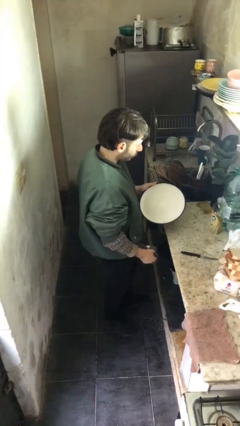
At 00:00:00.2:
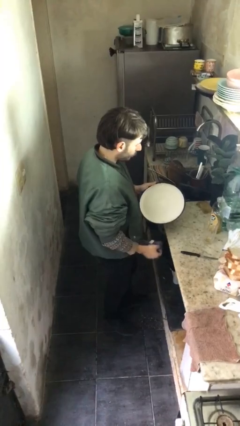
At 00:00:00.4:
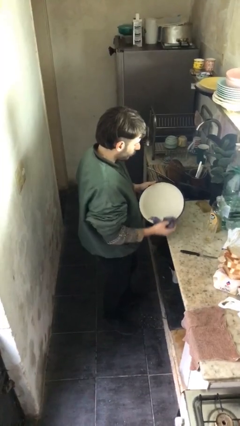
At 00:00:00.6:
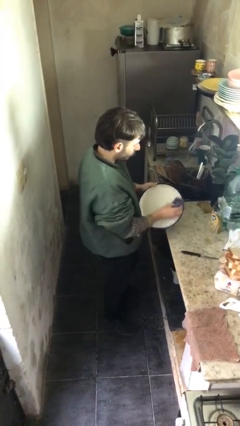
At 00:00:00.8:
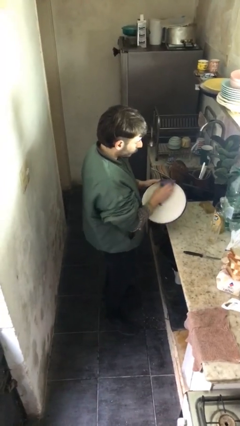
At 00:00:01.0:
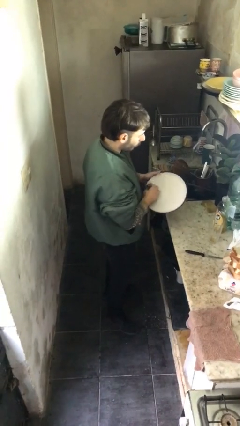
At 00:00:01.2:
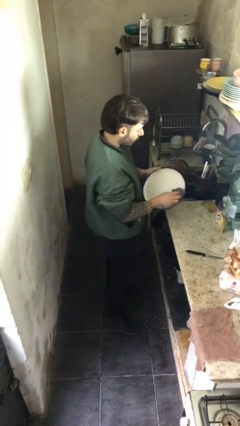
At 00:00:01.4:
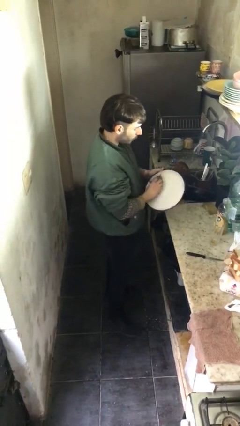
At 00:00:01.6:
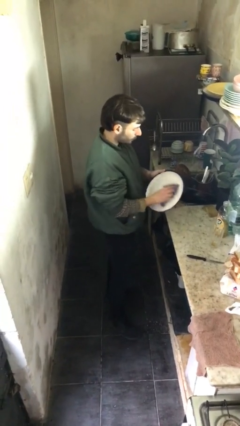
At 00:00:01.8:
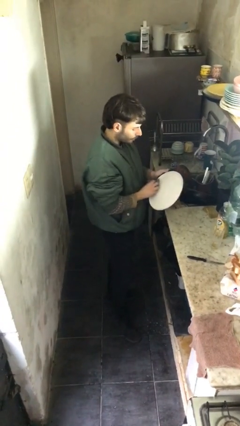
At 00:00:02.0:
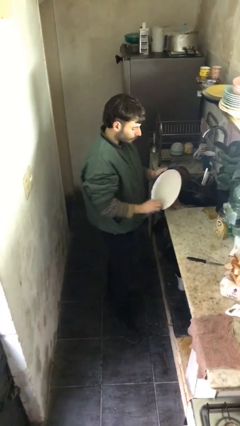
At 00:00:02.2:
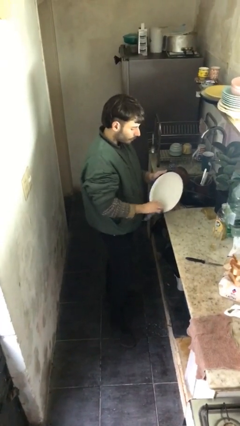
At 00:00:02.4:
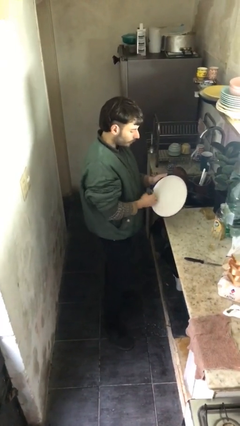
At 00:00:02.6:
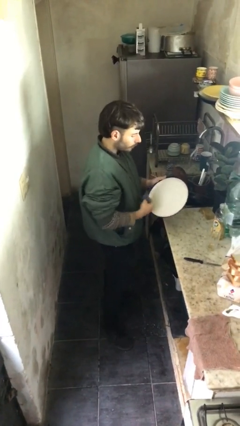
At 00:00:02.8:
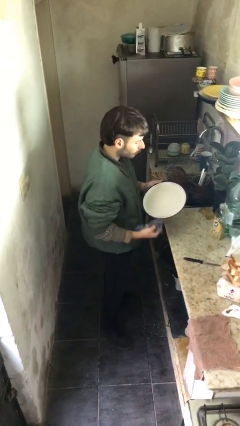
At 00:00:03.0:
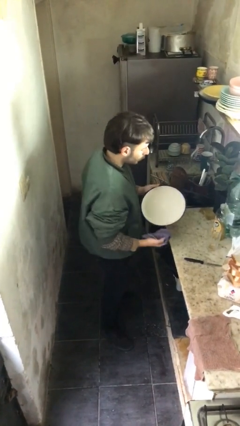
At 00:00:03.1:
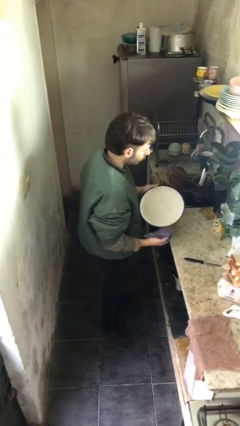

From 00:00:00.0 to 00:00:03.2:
person dries dish

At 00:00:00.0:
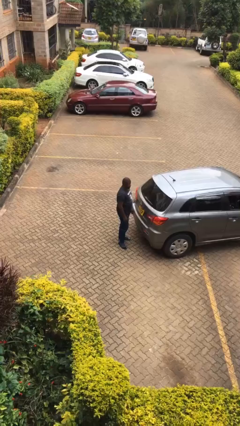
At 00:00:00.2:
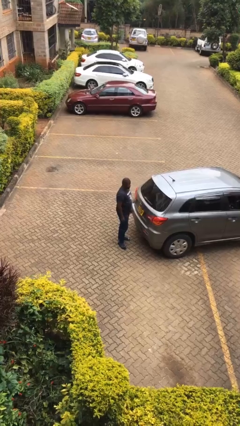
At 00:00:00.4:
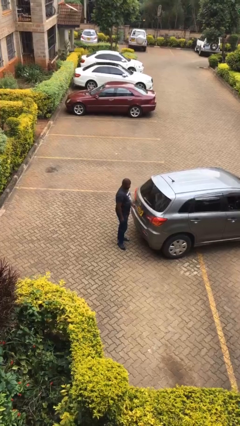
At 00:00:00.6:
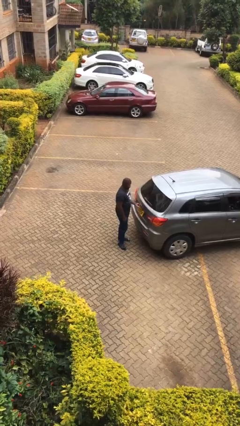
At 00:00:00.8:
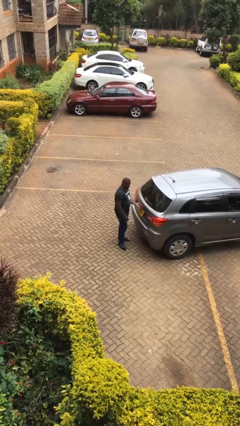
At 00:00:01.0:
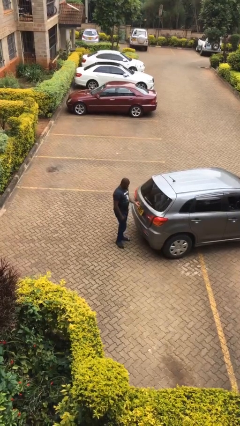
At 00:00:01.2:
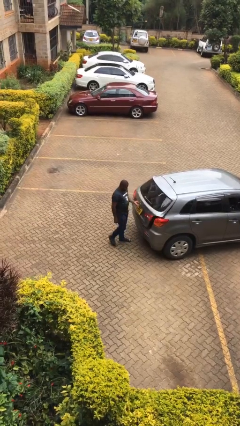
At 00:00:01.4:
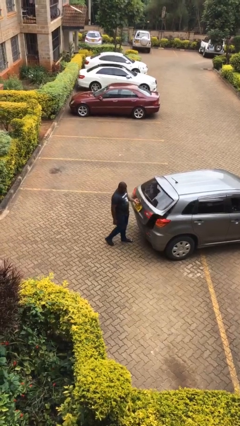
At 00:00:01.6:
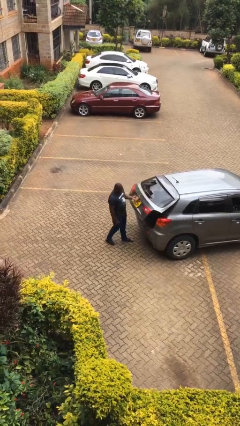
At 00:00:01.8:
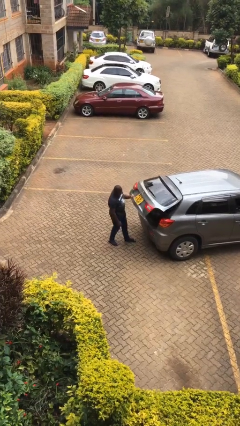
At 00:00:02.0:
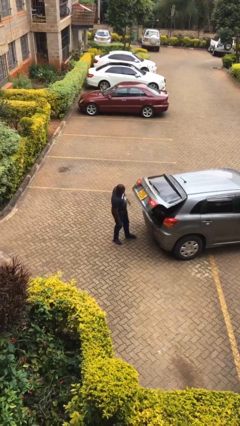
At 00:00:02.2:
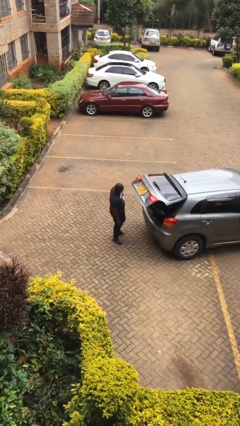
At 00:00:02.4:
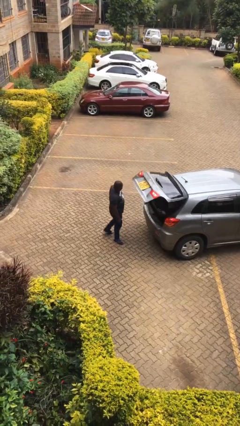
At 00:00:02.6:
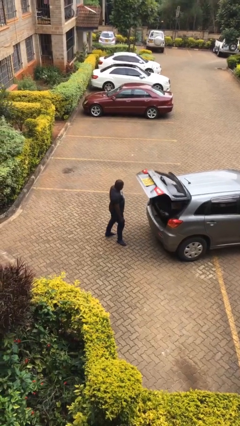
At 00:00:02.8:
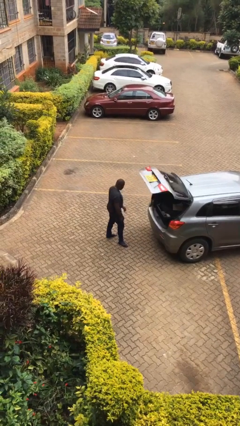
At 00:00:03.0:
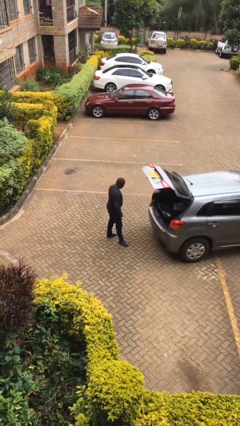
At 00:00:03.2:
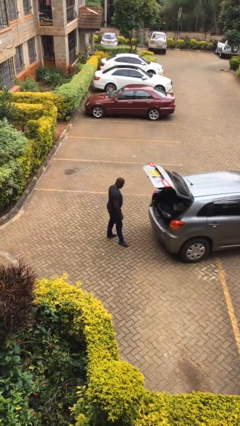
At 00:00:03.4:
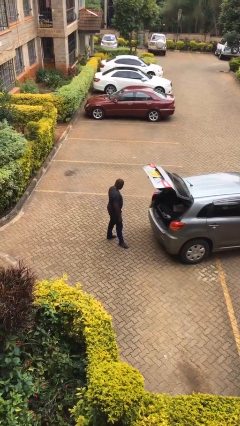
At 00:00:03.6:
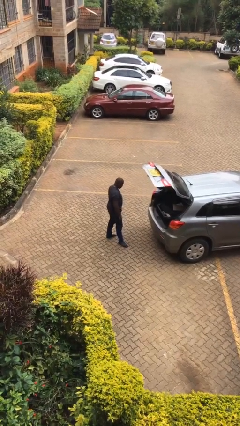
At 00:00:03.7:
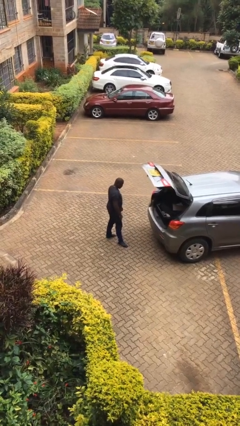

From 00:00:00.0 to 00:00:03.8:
person opens car trunk

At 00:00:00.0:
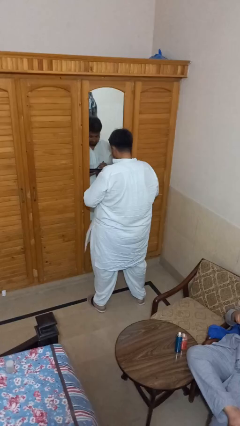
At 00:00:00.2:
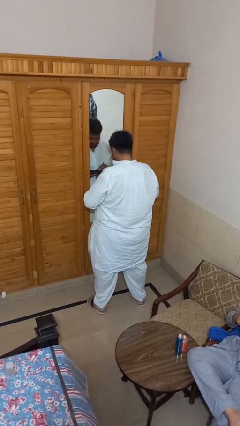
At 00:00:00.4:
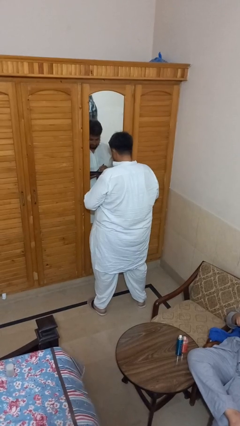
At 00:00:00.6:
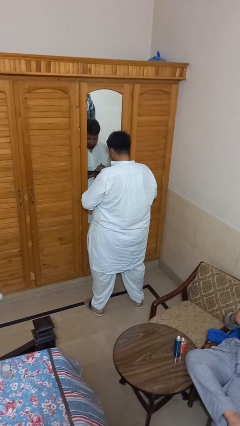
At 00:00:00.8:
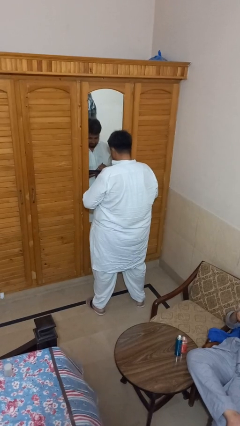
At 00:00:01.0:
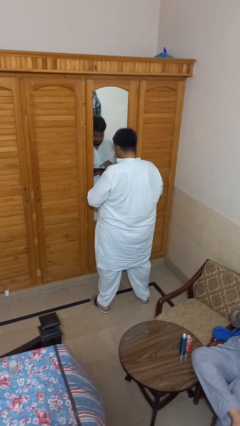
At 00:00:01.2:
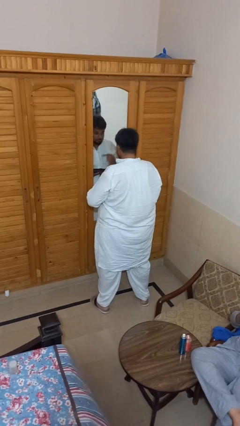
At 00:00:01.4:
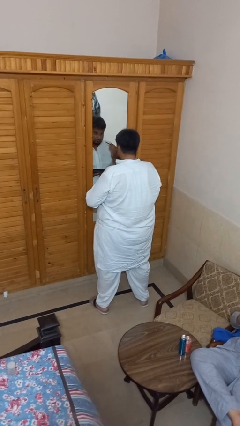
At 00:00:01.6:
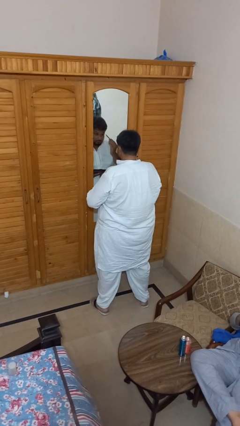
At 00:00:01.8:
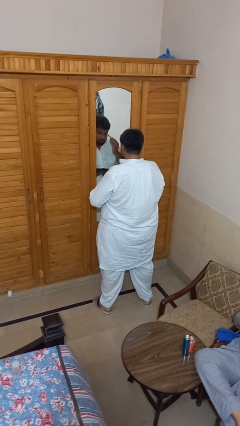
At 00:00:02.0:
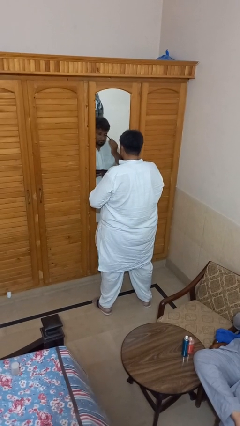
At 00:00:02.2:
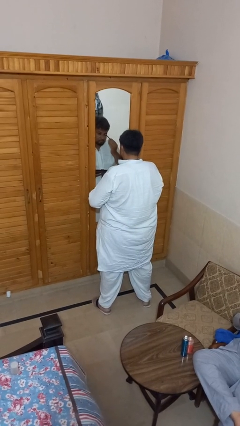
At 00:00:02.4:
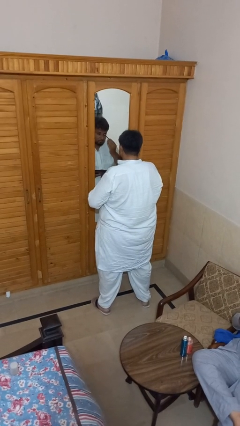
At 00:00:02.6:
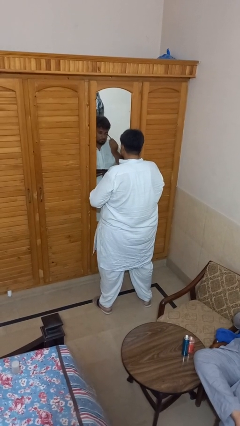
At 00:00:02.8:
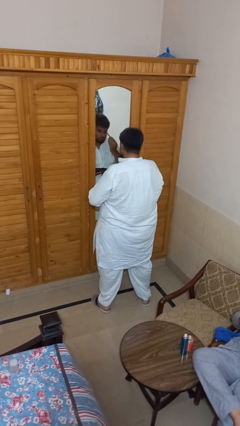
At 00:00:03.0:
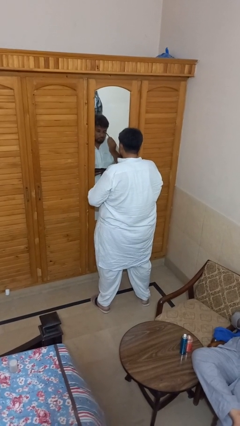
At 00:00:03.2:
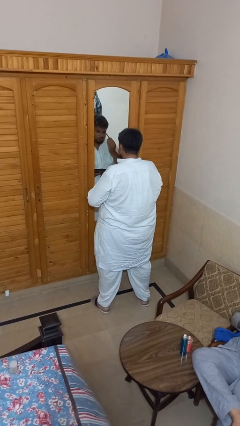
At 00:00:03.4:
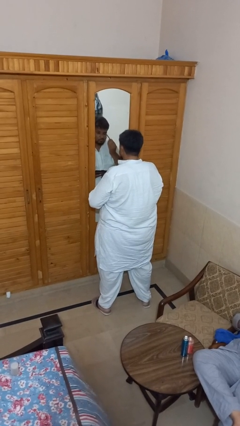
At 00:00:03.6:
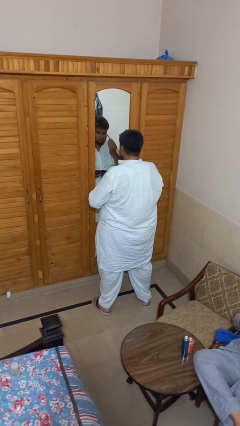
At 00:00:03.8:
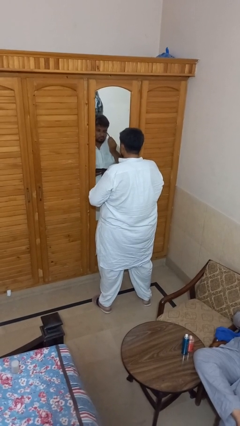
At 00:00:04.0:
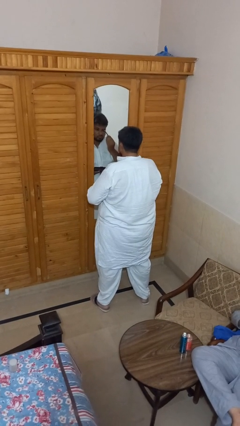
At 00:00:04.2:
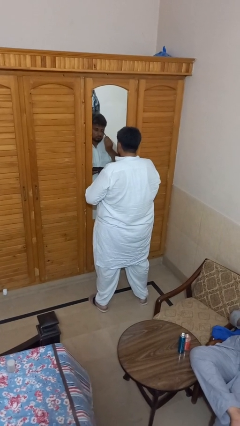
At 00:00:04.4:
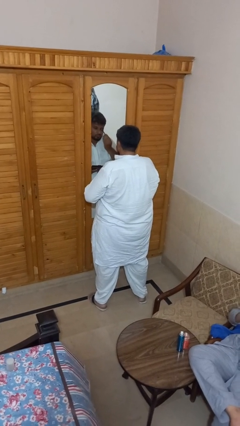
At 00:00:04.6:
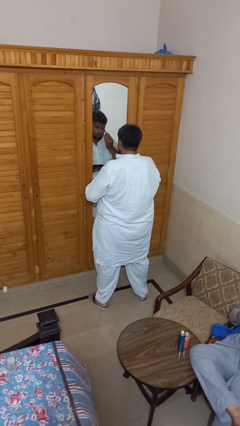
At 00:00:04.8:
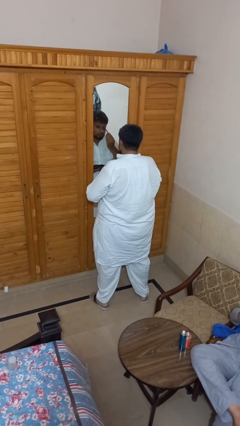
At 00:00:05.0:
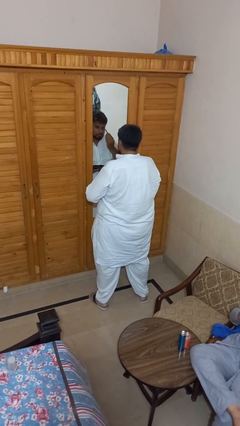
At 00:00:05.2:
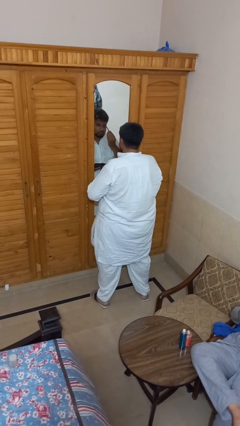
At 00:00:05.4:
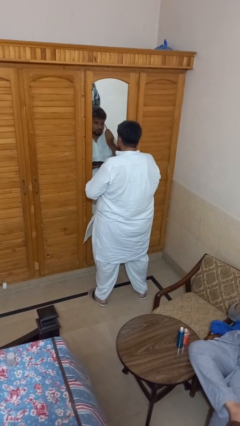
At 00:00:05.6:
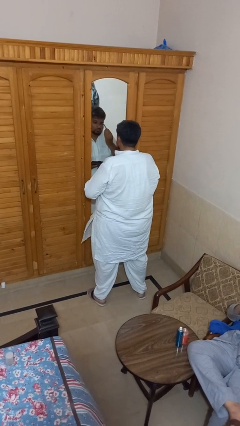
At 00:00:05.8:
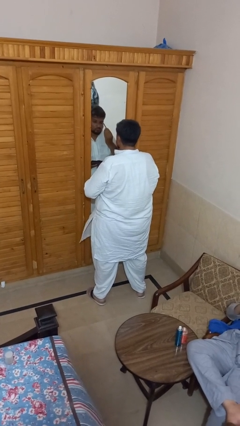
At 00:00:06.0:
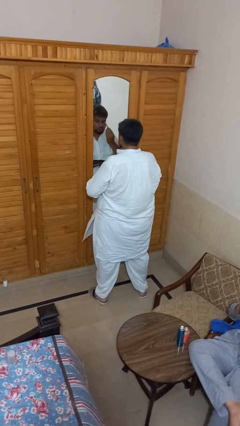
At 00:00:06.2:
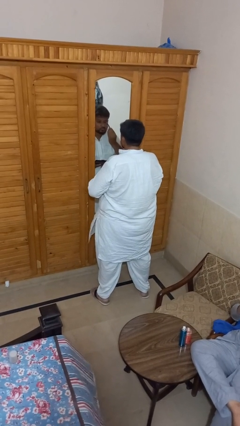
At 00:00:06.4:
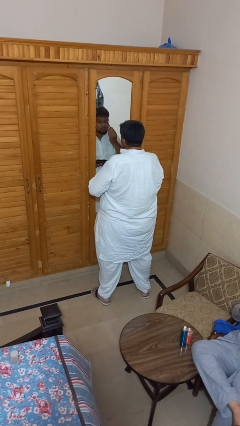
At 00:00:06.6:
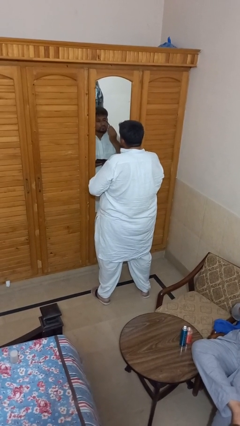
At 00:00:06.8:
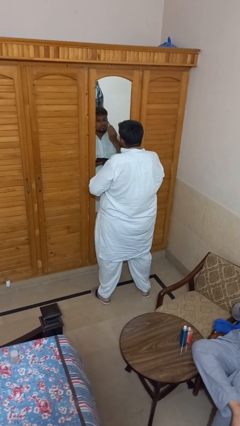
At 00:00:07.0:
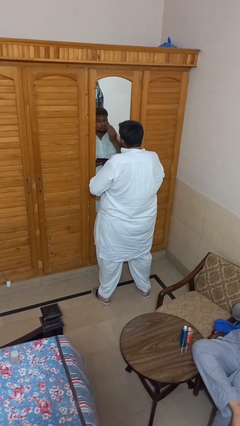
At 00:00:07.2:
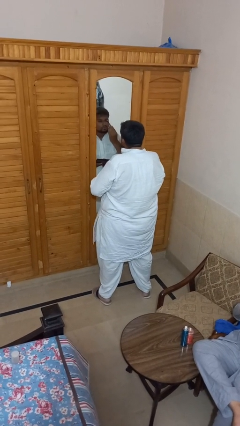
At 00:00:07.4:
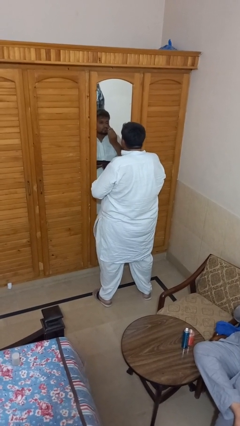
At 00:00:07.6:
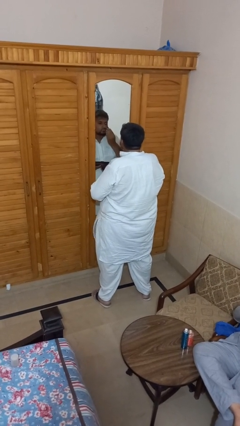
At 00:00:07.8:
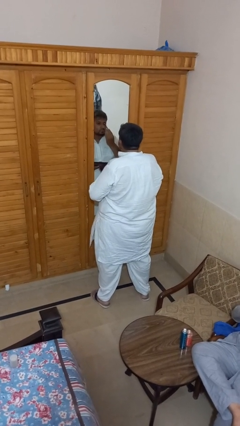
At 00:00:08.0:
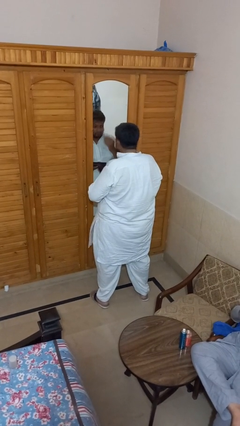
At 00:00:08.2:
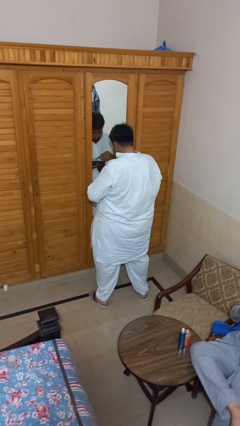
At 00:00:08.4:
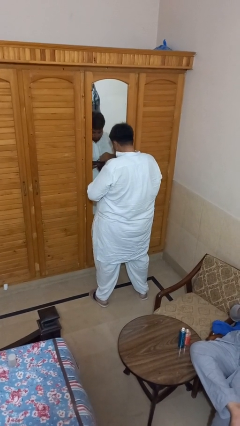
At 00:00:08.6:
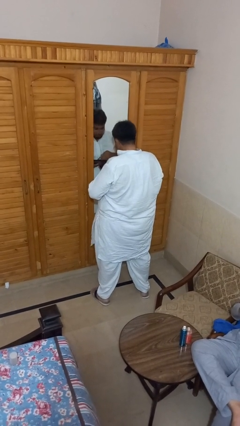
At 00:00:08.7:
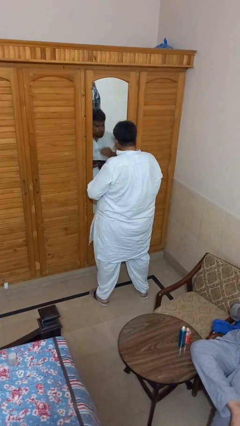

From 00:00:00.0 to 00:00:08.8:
person applies eye makeup

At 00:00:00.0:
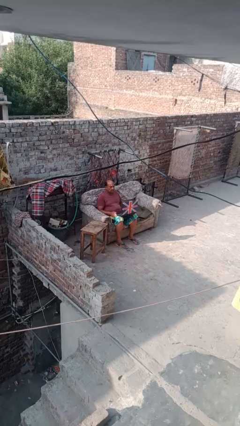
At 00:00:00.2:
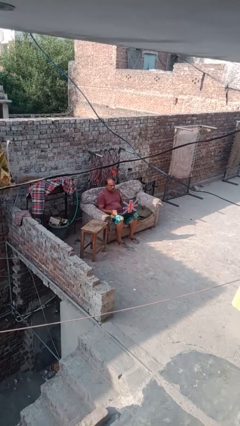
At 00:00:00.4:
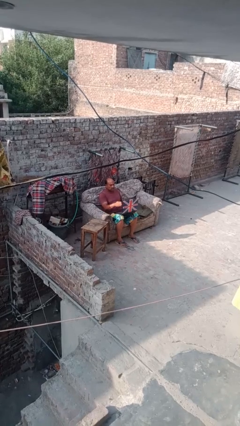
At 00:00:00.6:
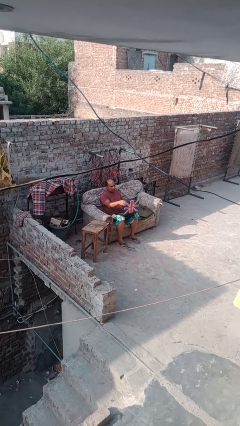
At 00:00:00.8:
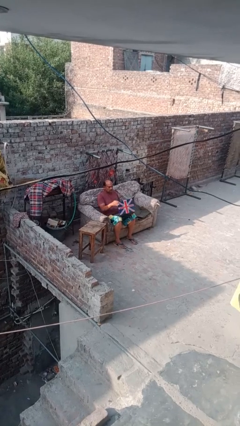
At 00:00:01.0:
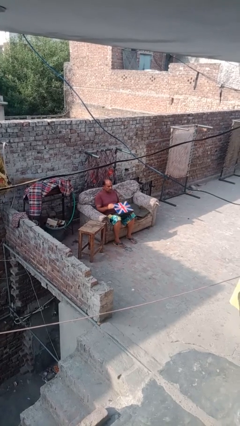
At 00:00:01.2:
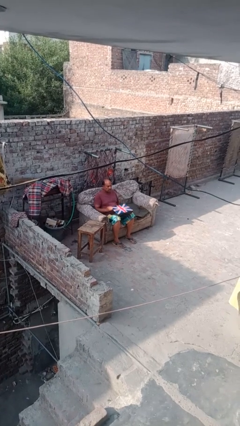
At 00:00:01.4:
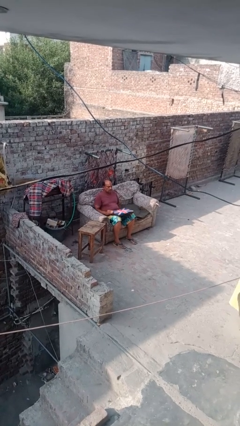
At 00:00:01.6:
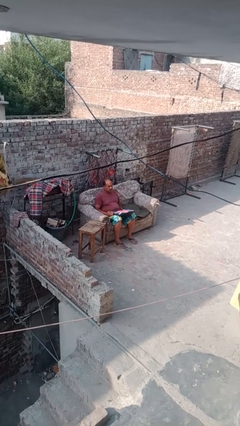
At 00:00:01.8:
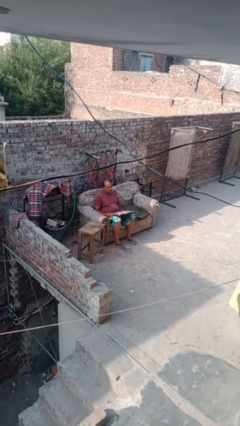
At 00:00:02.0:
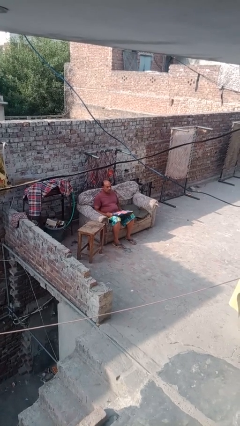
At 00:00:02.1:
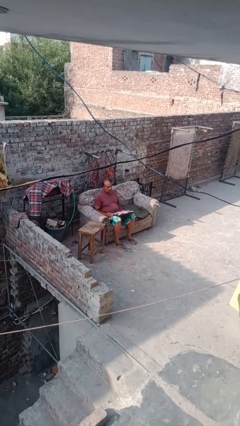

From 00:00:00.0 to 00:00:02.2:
person closes laptop
